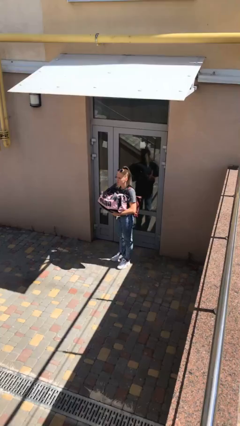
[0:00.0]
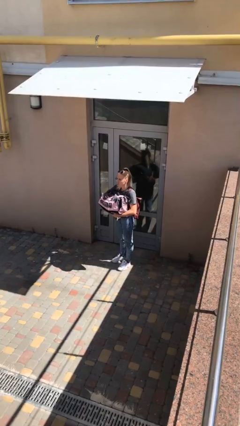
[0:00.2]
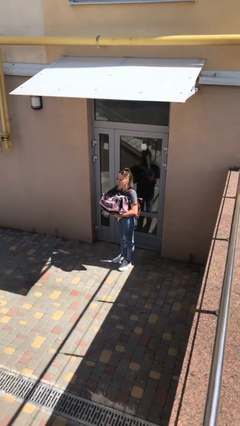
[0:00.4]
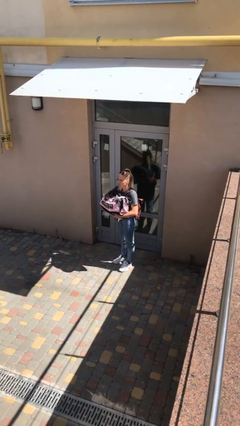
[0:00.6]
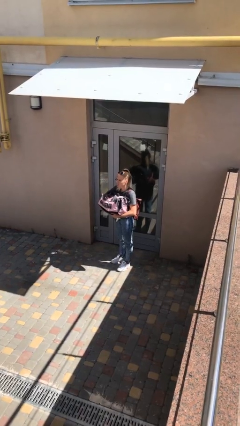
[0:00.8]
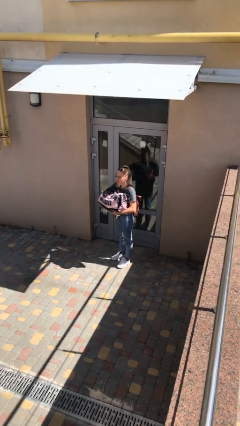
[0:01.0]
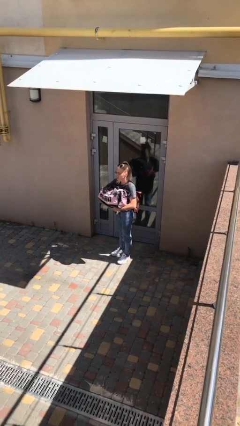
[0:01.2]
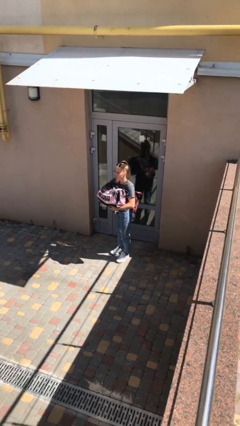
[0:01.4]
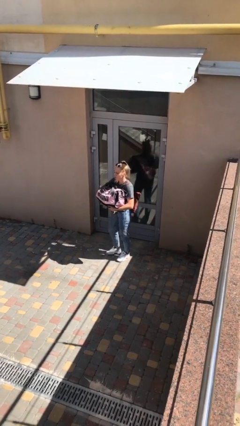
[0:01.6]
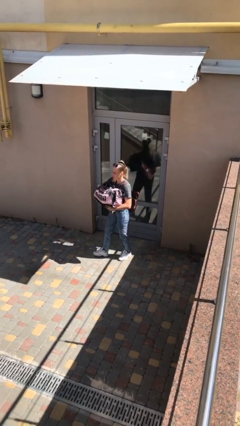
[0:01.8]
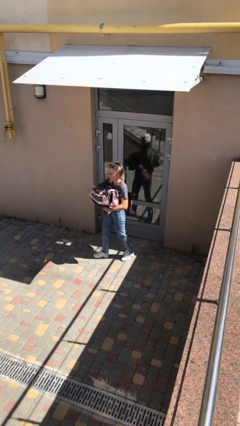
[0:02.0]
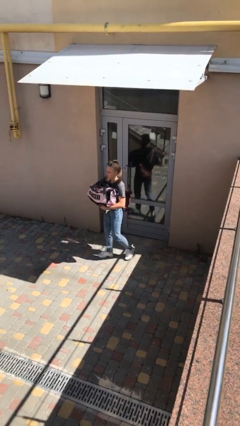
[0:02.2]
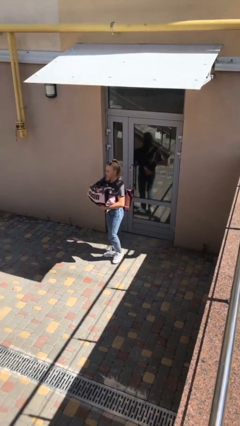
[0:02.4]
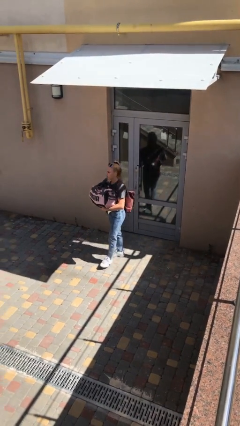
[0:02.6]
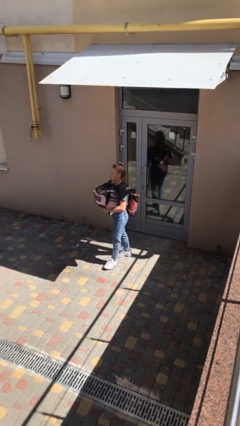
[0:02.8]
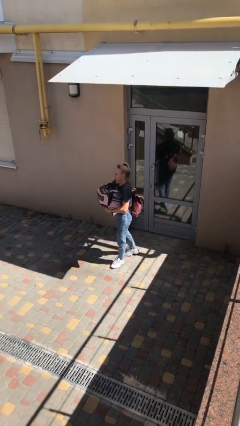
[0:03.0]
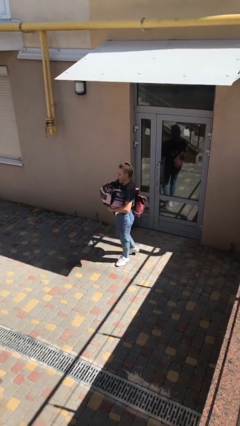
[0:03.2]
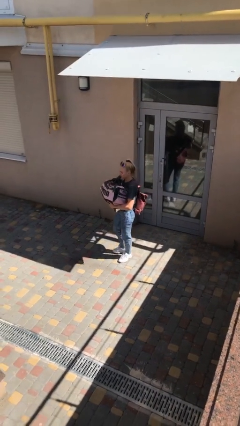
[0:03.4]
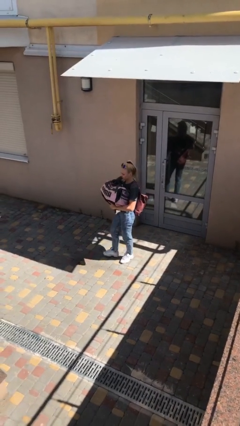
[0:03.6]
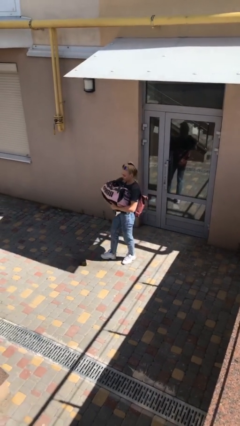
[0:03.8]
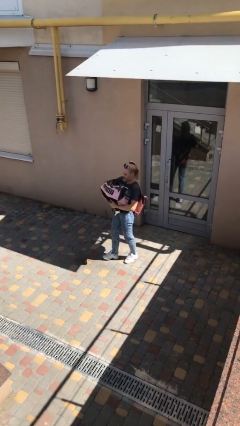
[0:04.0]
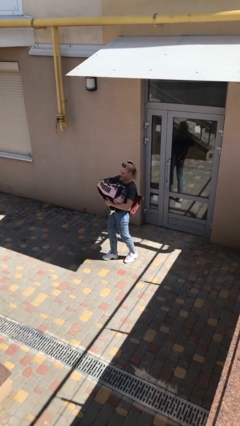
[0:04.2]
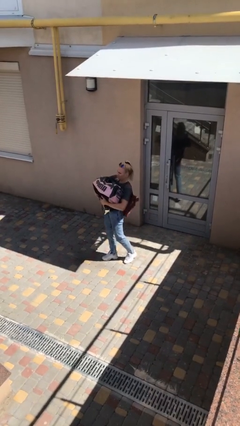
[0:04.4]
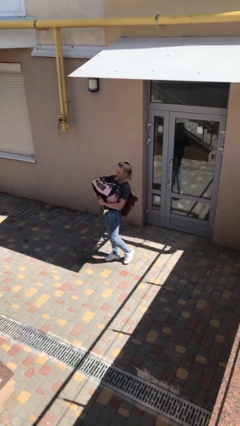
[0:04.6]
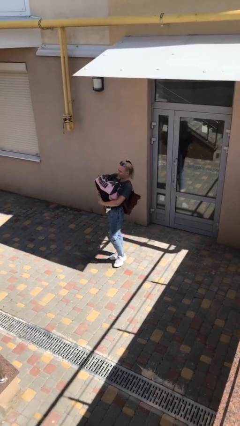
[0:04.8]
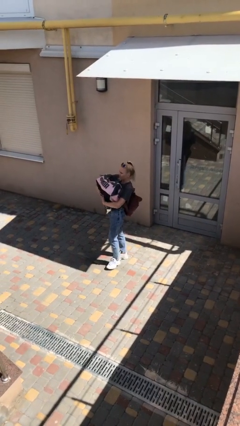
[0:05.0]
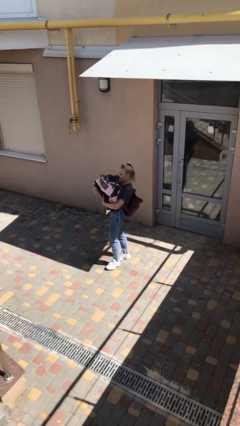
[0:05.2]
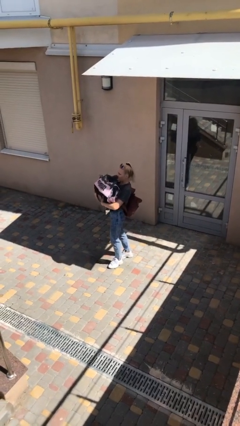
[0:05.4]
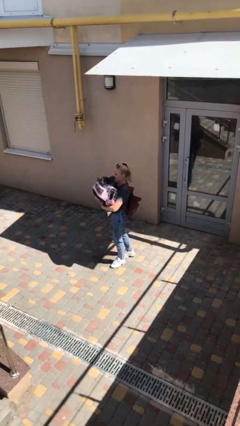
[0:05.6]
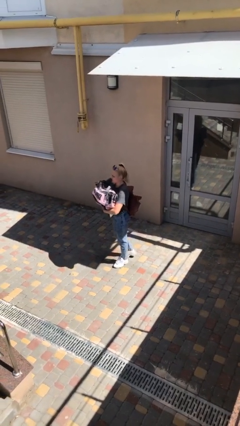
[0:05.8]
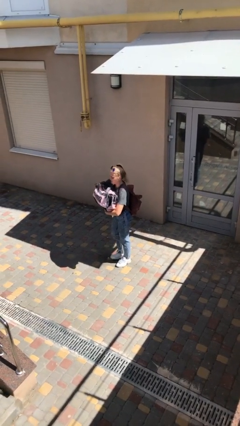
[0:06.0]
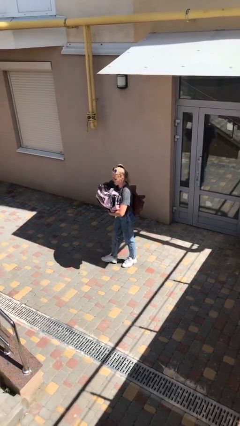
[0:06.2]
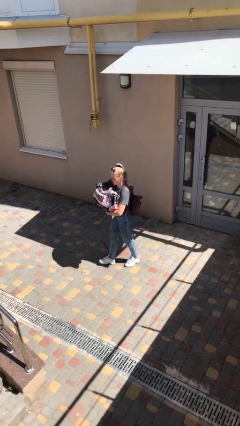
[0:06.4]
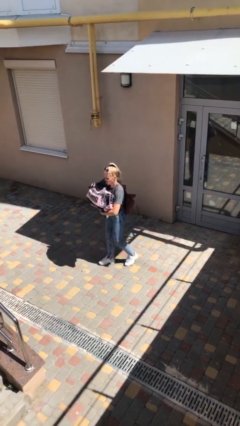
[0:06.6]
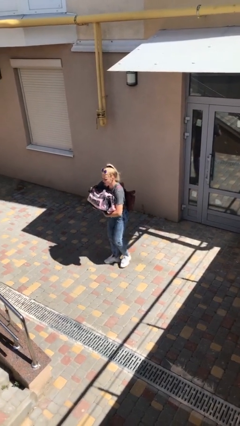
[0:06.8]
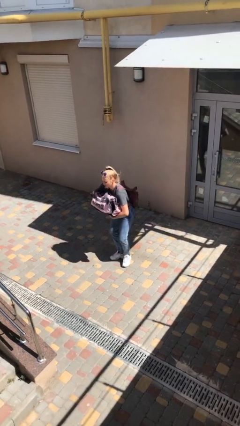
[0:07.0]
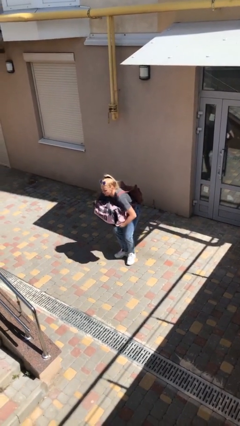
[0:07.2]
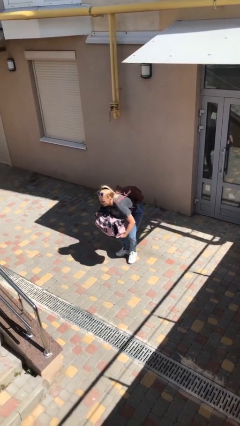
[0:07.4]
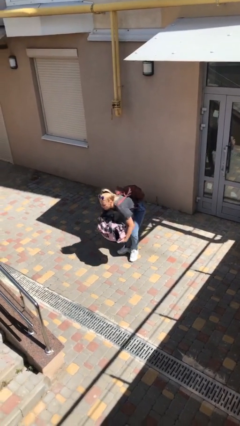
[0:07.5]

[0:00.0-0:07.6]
person carries heavy object

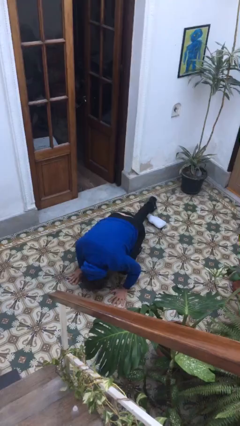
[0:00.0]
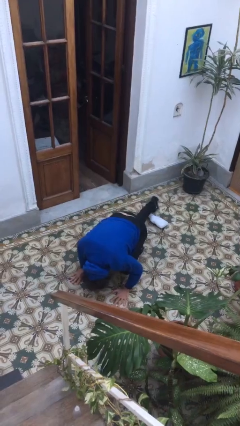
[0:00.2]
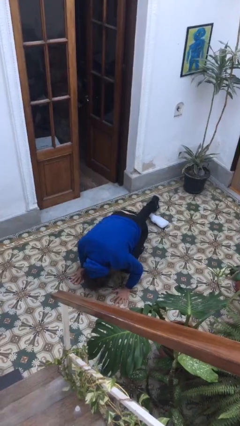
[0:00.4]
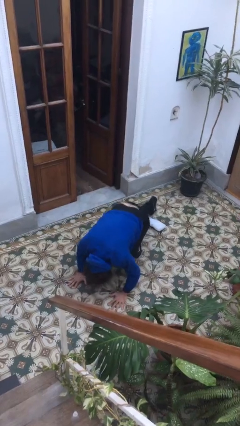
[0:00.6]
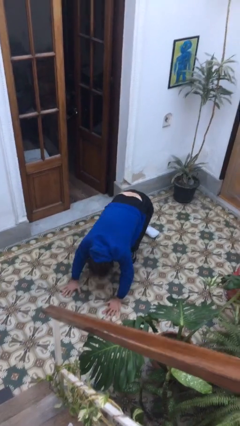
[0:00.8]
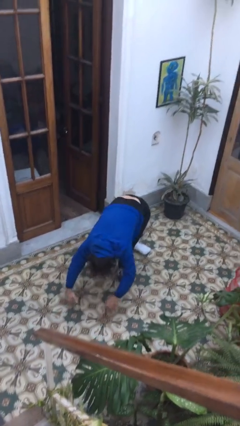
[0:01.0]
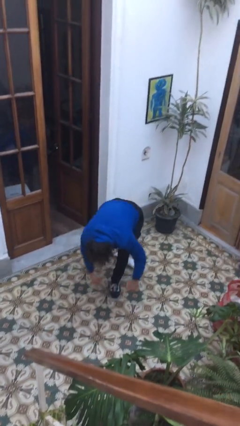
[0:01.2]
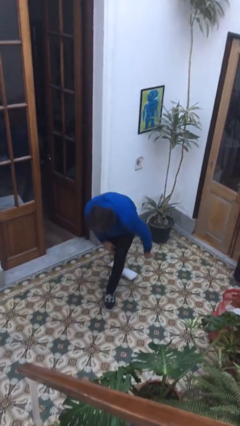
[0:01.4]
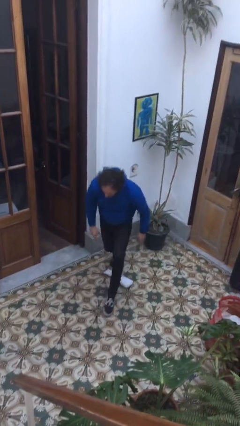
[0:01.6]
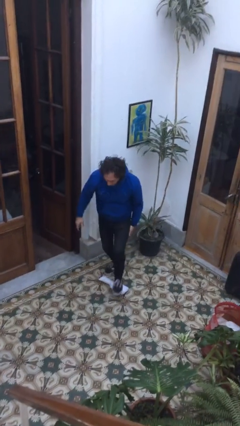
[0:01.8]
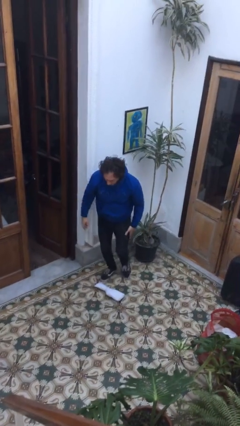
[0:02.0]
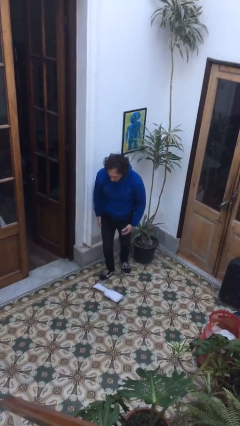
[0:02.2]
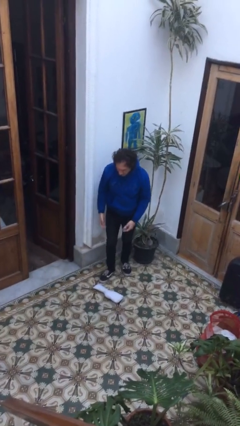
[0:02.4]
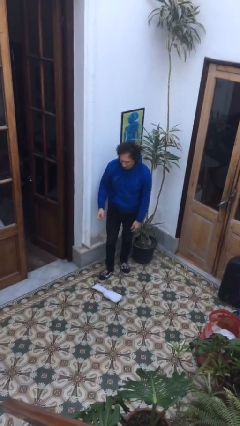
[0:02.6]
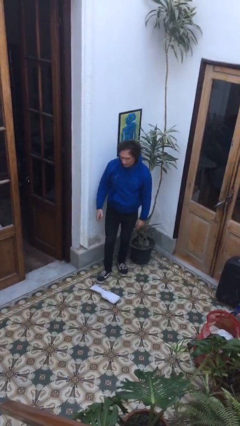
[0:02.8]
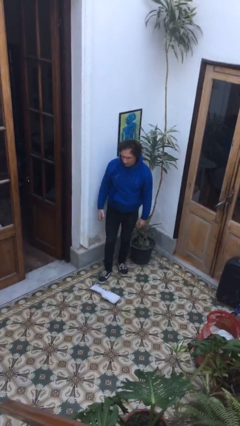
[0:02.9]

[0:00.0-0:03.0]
person stands up from floor

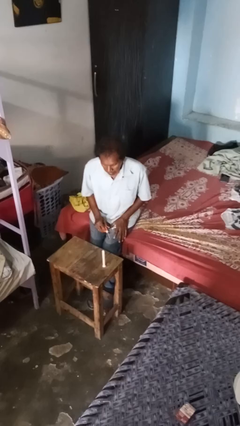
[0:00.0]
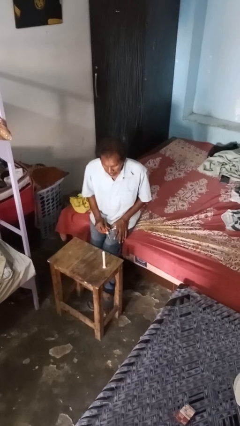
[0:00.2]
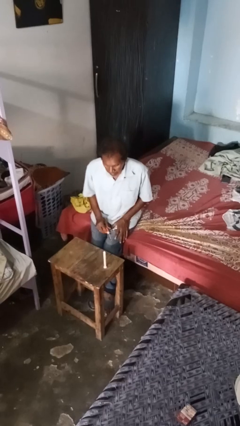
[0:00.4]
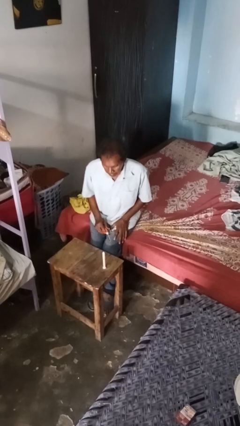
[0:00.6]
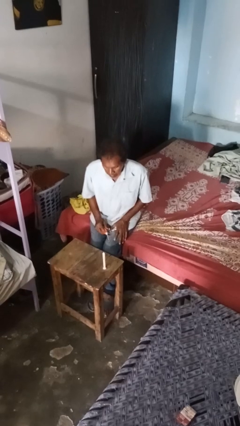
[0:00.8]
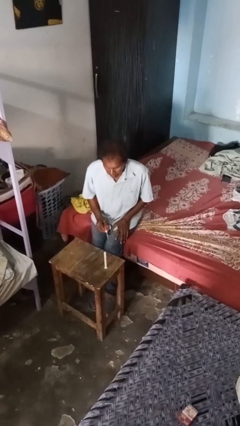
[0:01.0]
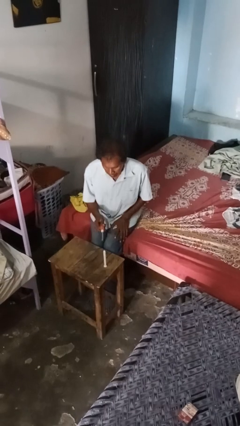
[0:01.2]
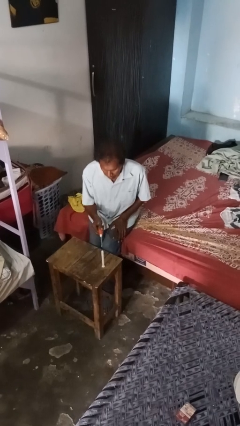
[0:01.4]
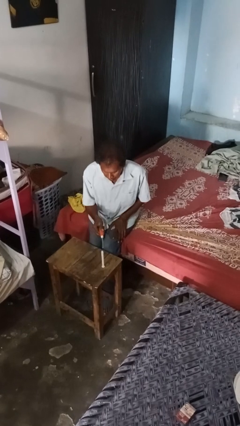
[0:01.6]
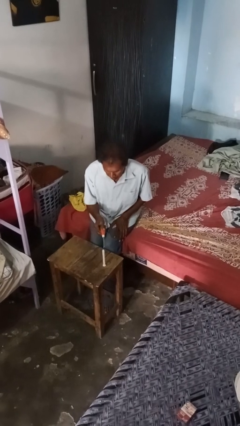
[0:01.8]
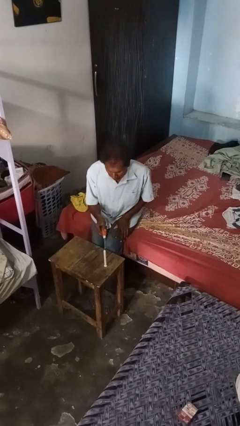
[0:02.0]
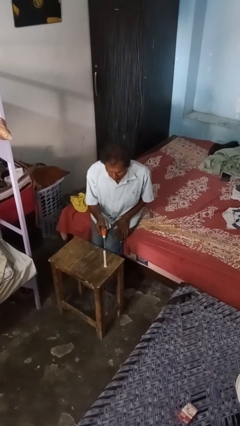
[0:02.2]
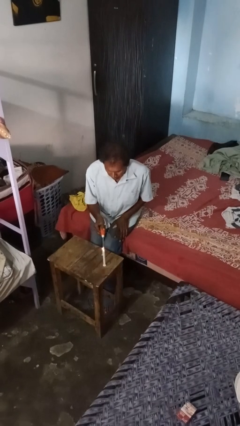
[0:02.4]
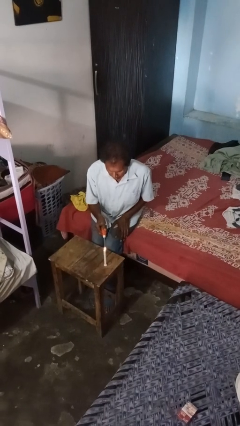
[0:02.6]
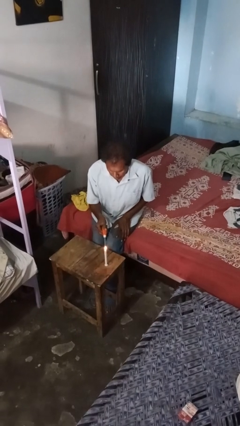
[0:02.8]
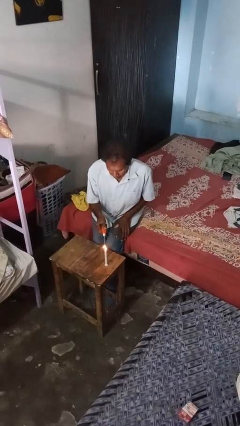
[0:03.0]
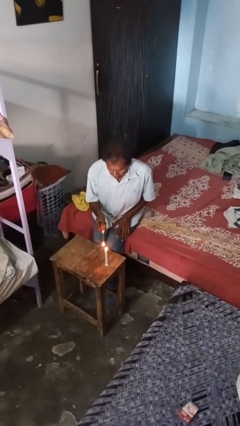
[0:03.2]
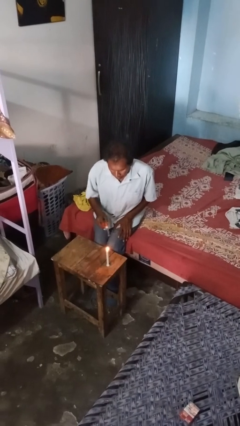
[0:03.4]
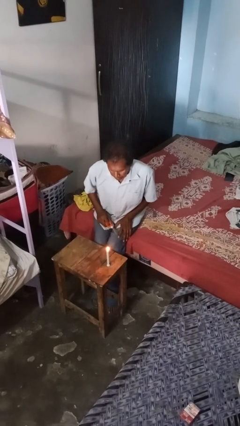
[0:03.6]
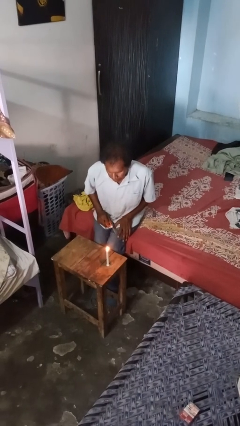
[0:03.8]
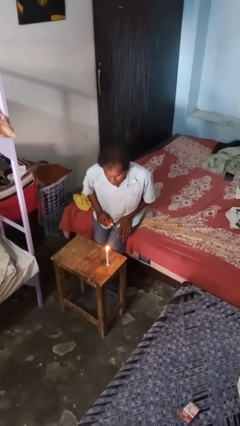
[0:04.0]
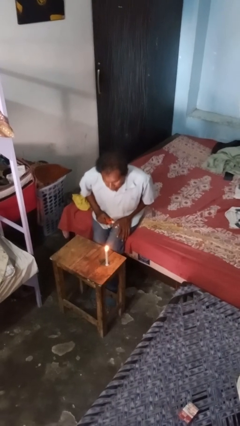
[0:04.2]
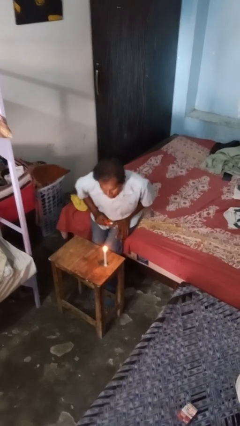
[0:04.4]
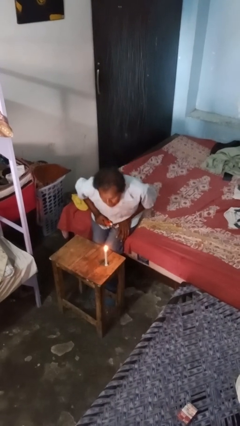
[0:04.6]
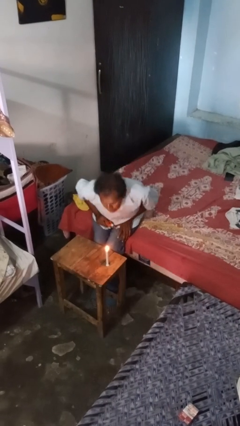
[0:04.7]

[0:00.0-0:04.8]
person lights candle

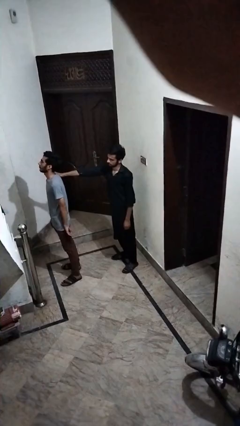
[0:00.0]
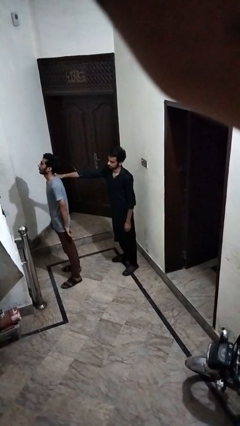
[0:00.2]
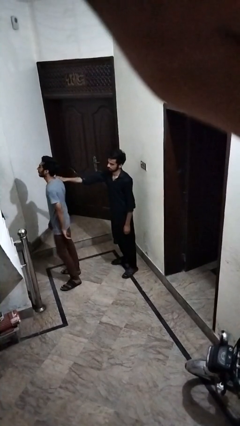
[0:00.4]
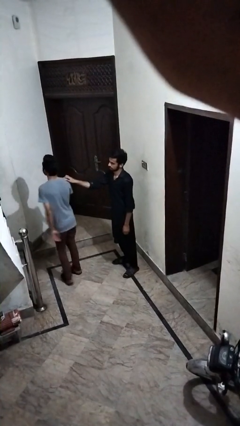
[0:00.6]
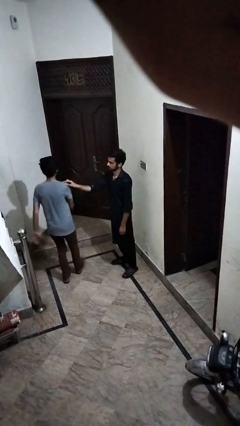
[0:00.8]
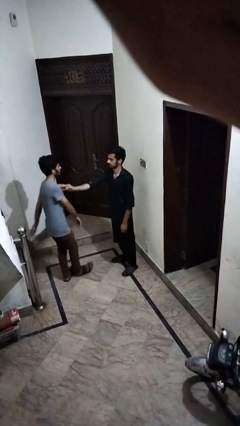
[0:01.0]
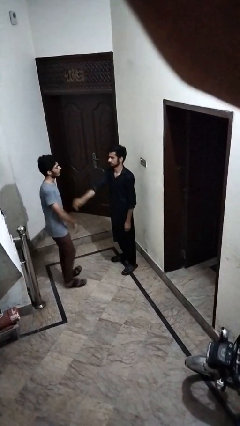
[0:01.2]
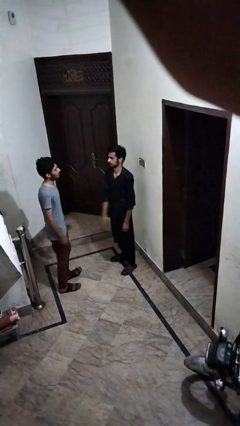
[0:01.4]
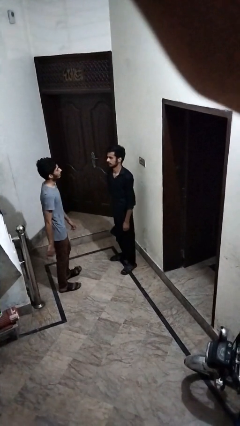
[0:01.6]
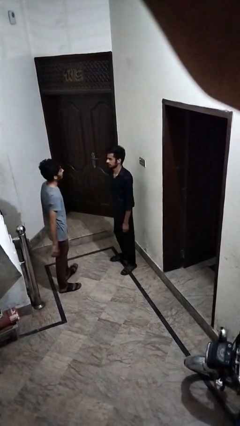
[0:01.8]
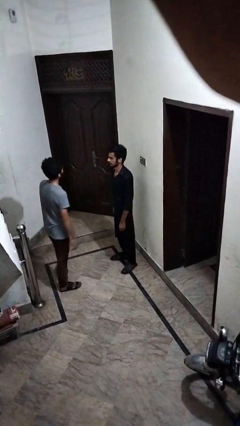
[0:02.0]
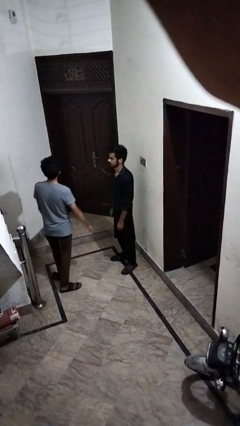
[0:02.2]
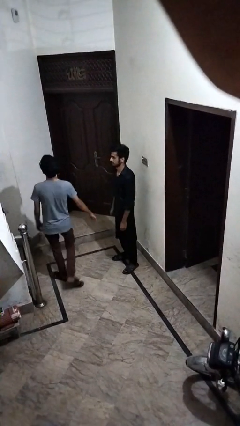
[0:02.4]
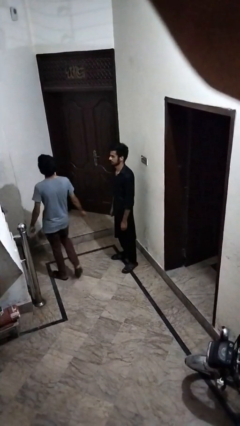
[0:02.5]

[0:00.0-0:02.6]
person spins person around
